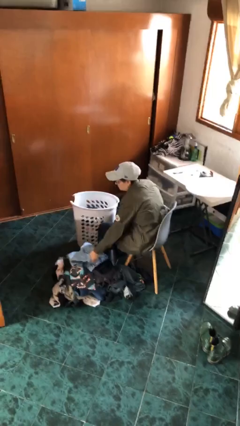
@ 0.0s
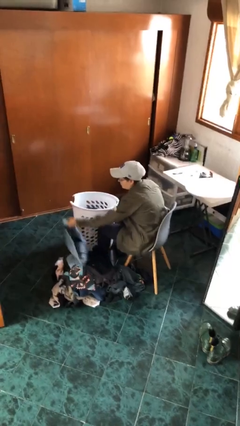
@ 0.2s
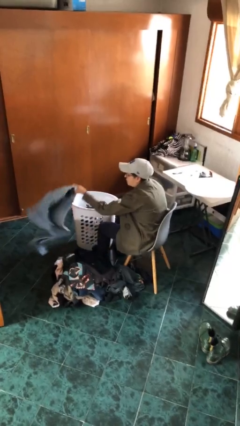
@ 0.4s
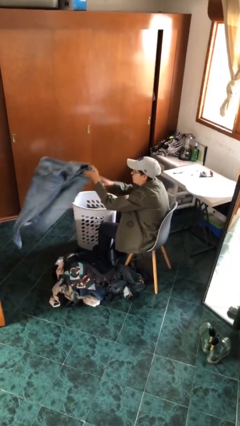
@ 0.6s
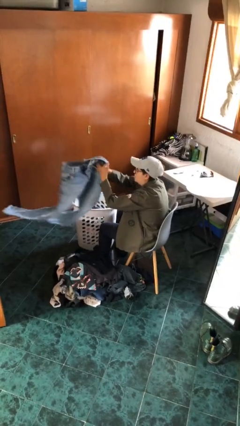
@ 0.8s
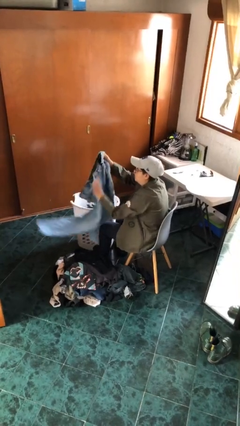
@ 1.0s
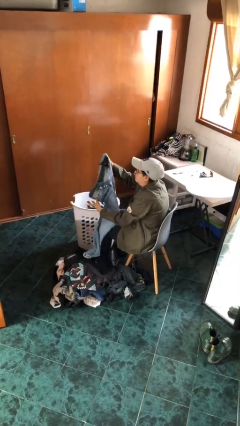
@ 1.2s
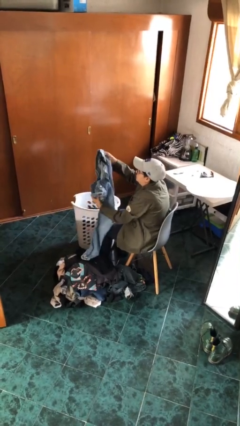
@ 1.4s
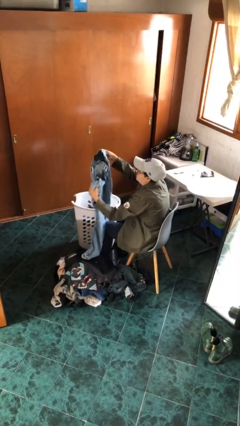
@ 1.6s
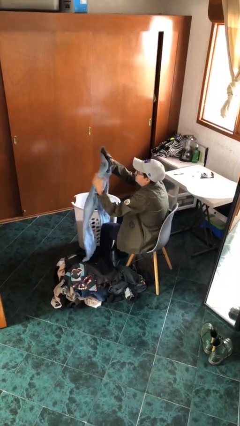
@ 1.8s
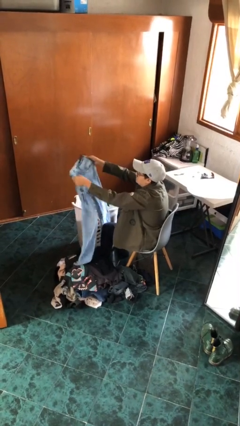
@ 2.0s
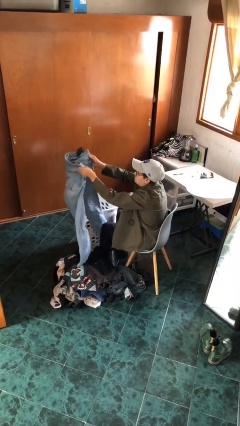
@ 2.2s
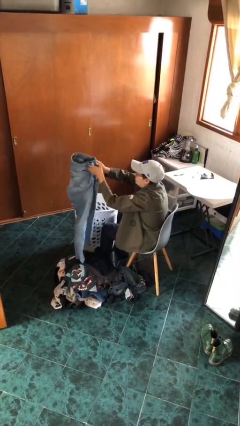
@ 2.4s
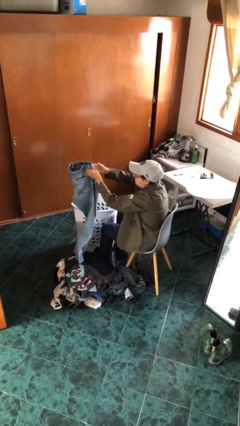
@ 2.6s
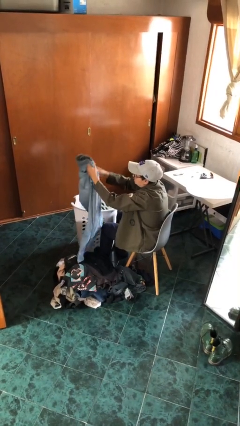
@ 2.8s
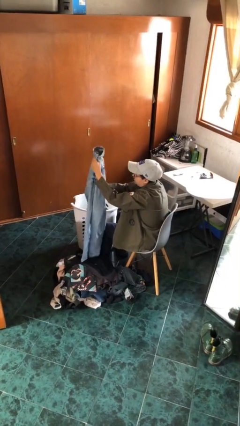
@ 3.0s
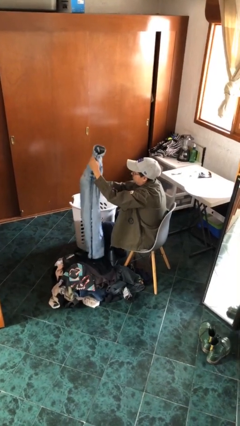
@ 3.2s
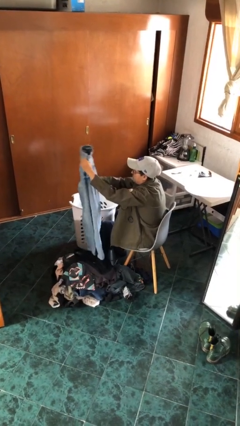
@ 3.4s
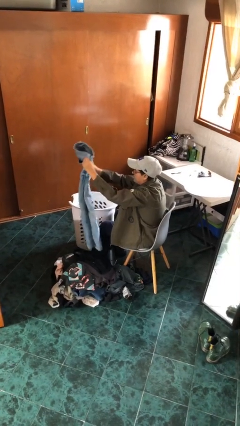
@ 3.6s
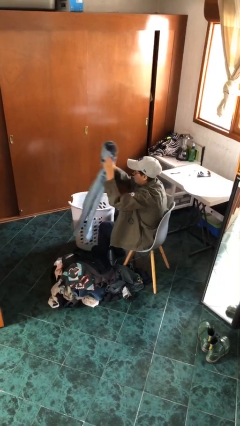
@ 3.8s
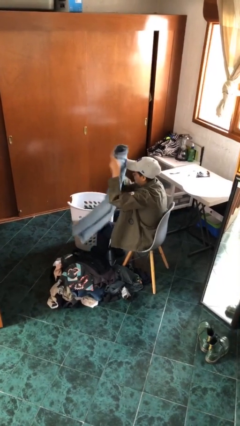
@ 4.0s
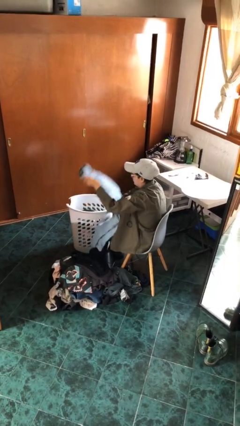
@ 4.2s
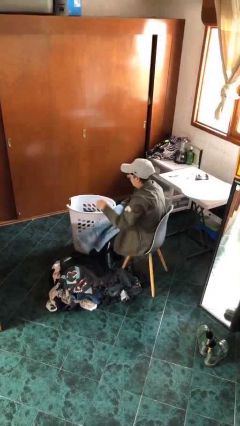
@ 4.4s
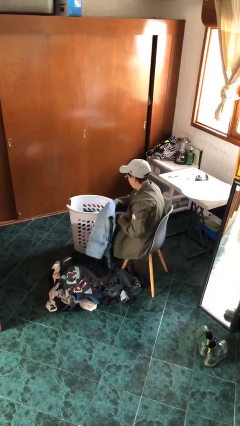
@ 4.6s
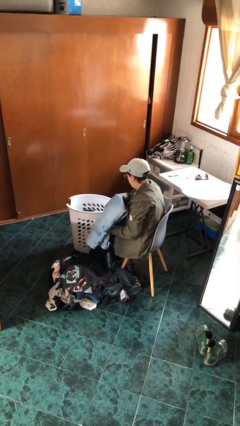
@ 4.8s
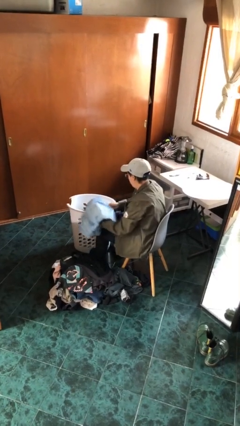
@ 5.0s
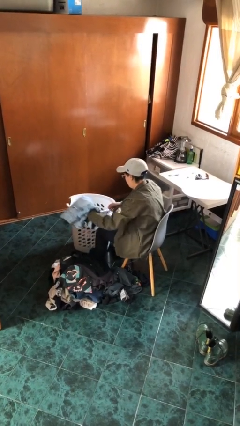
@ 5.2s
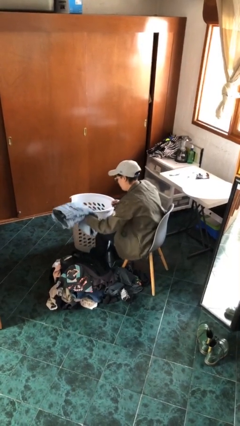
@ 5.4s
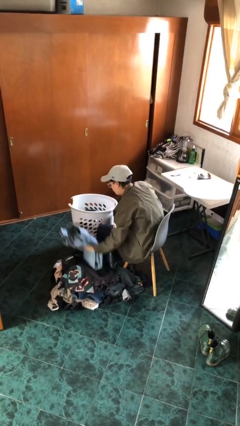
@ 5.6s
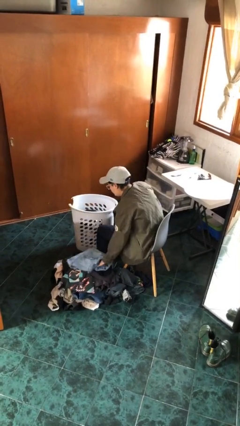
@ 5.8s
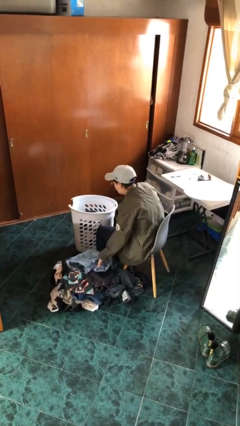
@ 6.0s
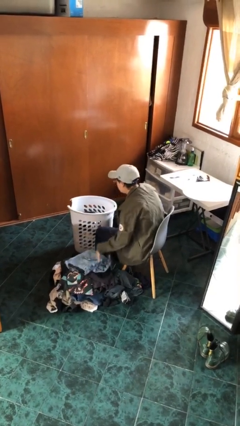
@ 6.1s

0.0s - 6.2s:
person folds pants

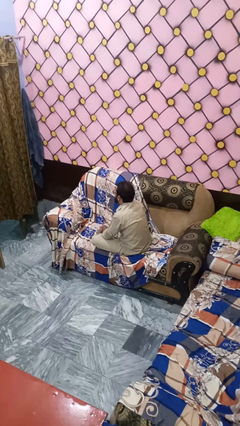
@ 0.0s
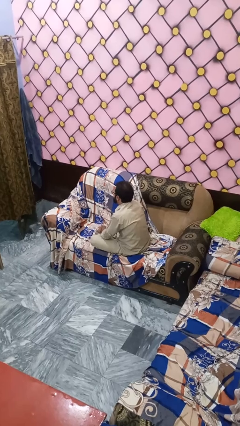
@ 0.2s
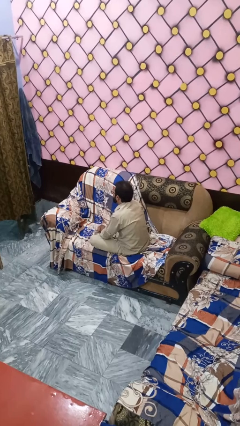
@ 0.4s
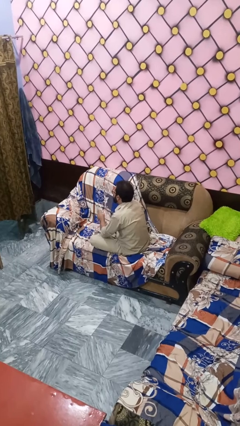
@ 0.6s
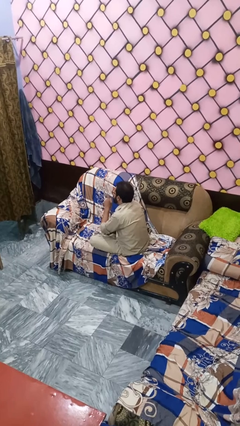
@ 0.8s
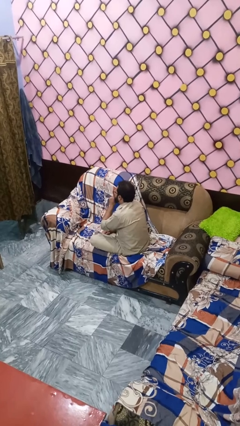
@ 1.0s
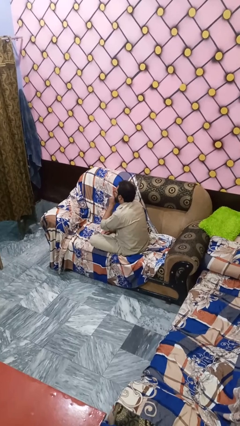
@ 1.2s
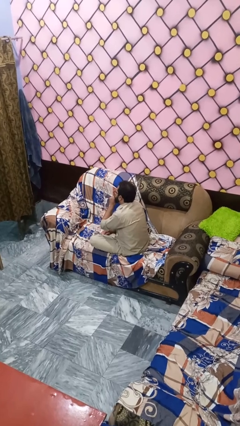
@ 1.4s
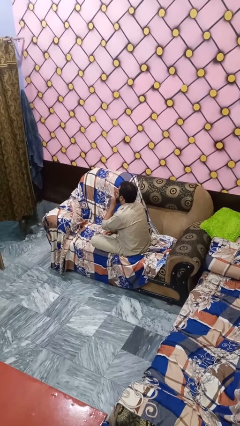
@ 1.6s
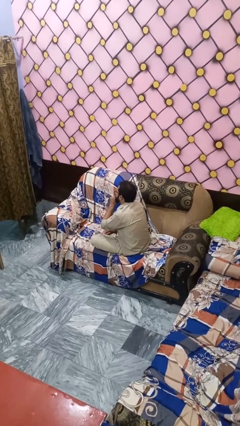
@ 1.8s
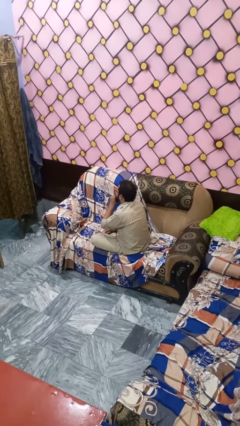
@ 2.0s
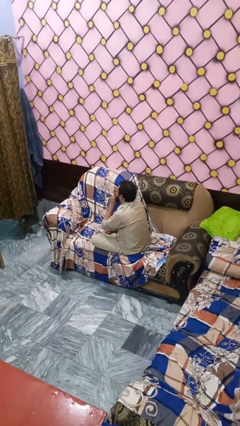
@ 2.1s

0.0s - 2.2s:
person gestures be quiet

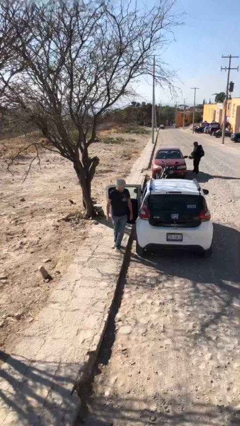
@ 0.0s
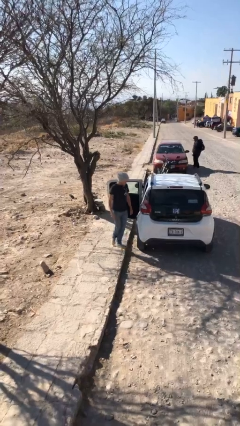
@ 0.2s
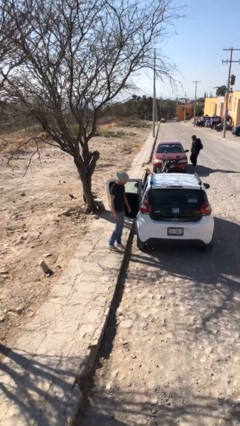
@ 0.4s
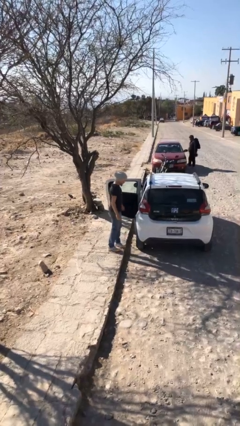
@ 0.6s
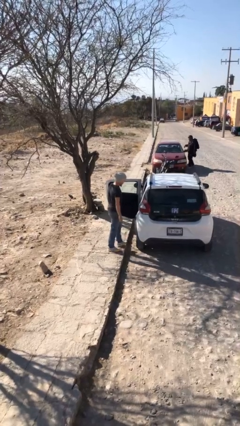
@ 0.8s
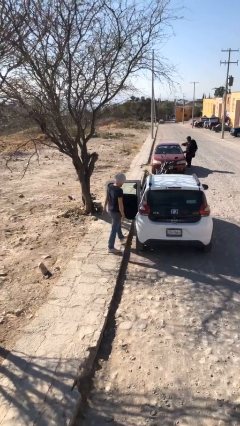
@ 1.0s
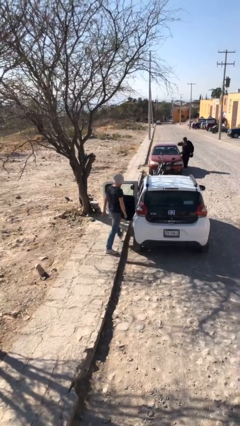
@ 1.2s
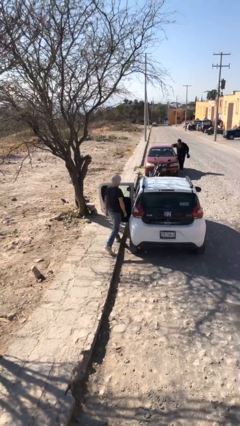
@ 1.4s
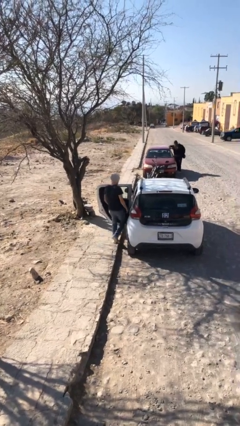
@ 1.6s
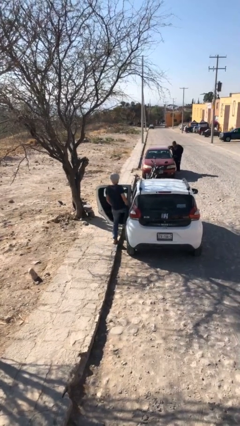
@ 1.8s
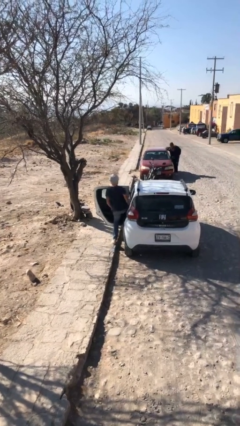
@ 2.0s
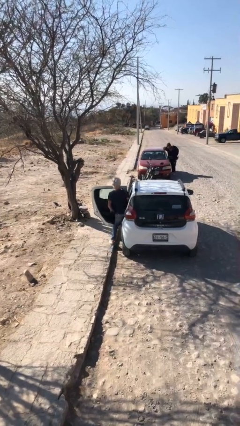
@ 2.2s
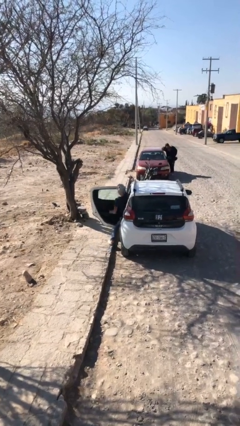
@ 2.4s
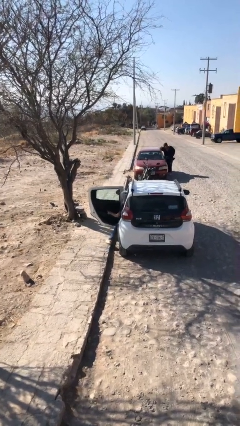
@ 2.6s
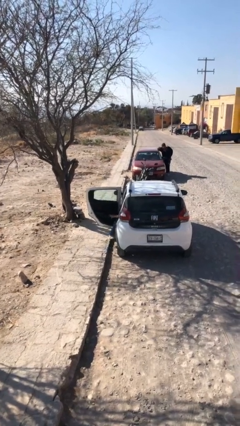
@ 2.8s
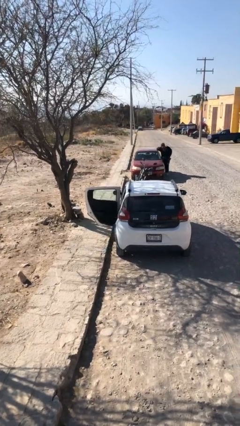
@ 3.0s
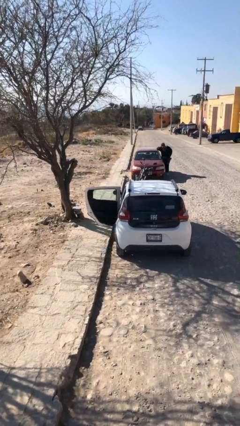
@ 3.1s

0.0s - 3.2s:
person enters car

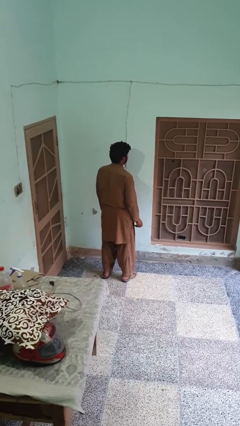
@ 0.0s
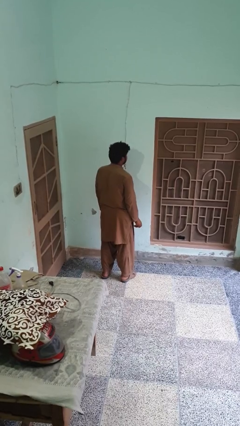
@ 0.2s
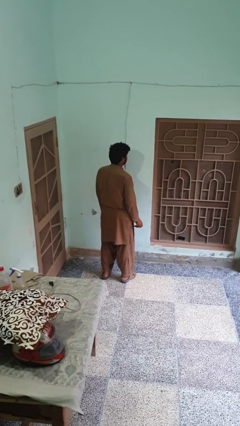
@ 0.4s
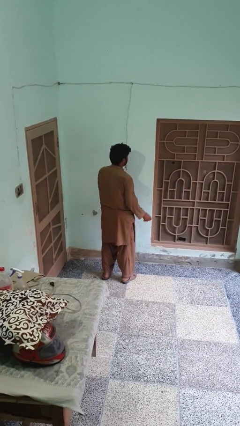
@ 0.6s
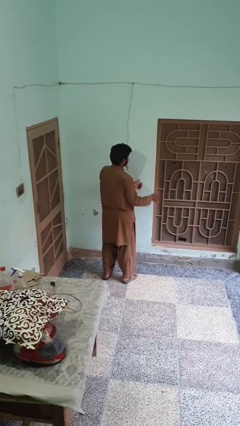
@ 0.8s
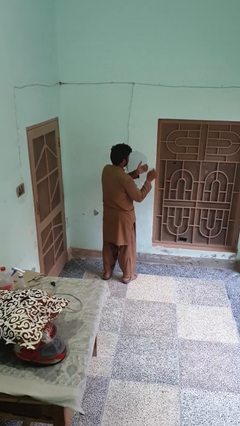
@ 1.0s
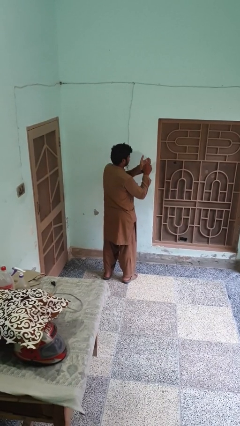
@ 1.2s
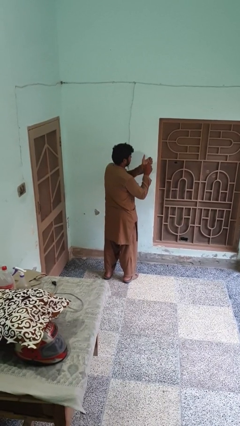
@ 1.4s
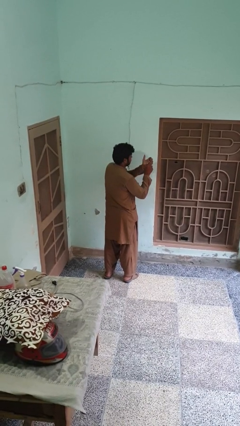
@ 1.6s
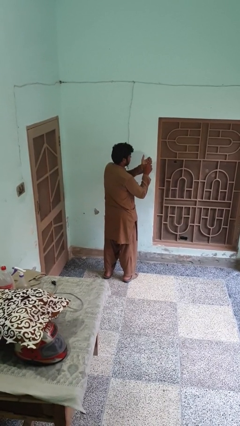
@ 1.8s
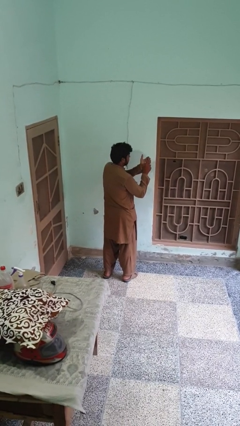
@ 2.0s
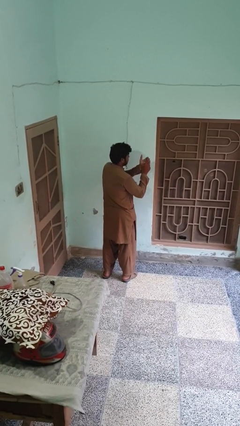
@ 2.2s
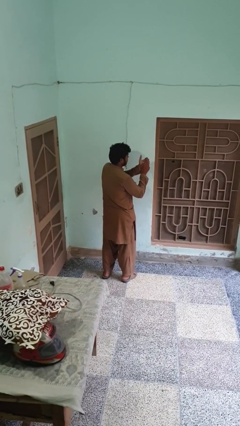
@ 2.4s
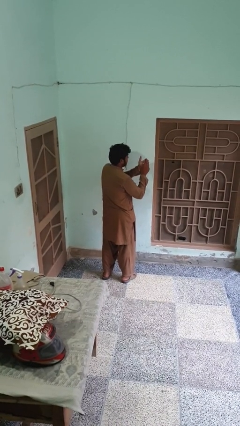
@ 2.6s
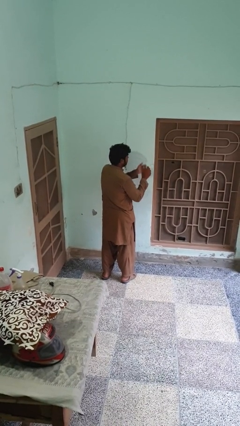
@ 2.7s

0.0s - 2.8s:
person paints fingernails

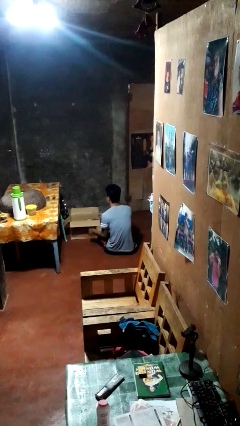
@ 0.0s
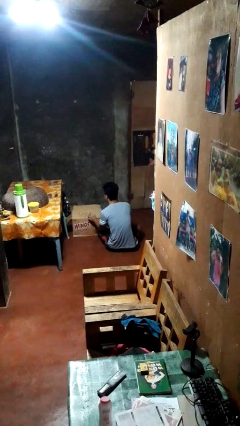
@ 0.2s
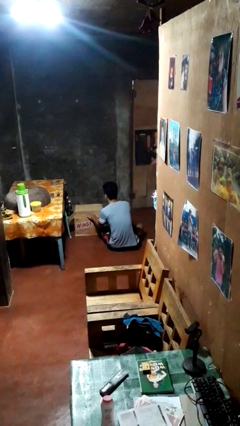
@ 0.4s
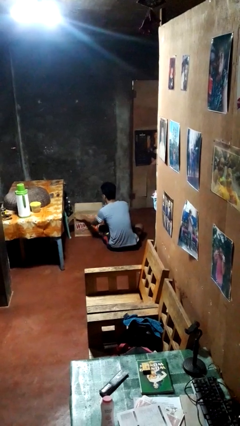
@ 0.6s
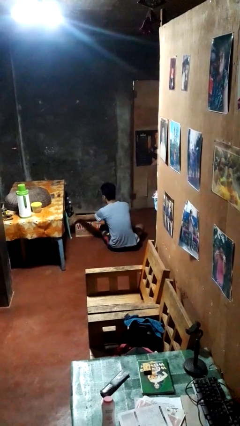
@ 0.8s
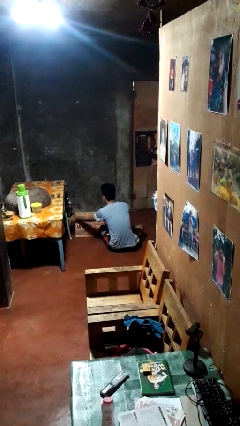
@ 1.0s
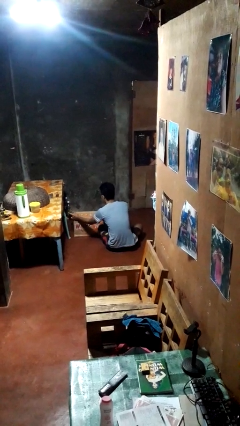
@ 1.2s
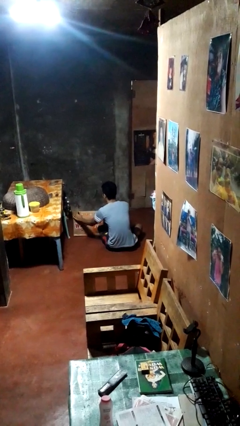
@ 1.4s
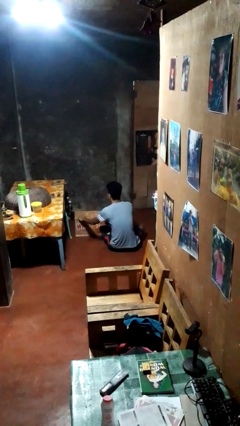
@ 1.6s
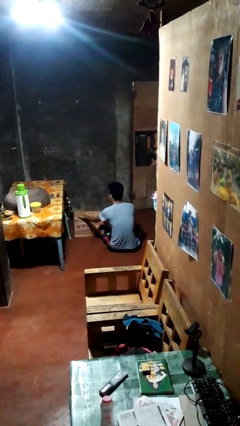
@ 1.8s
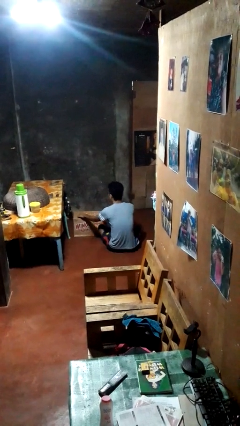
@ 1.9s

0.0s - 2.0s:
person closes box

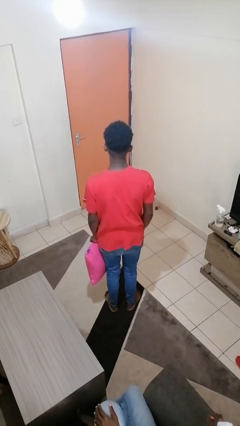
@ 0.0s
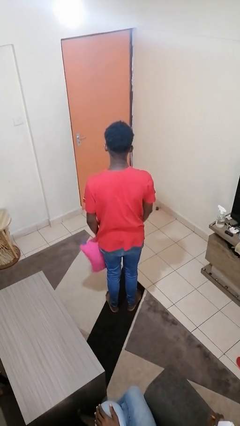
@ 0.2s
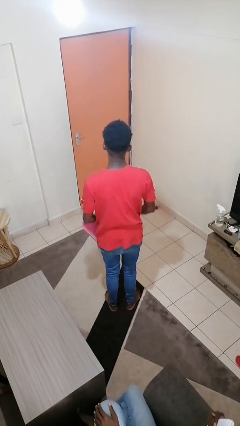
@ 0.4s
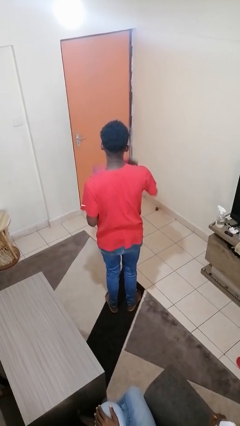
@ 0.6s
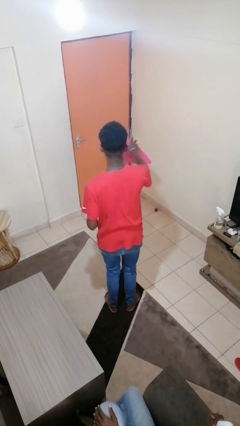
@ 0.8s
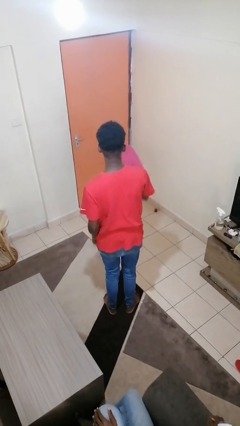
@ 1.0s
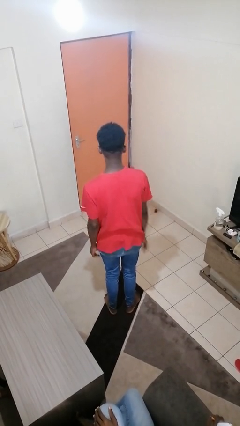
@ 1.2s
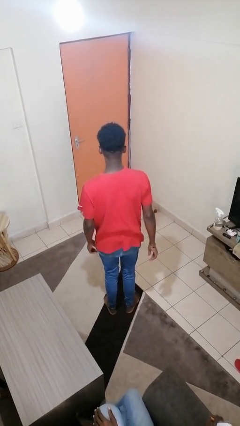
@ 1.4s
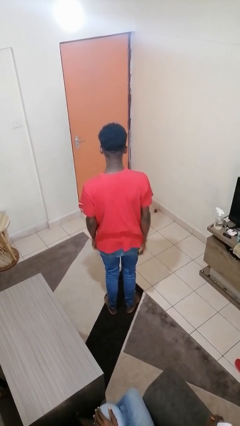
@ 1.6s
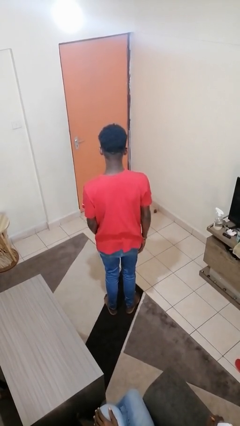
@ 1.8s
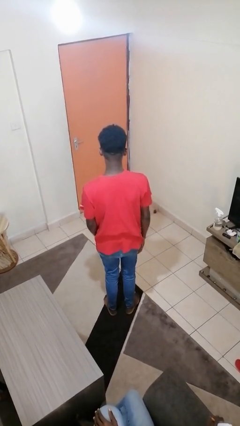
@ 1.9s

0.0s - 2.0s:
person throws object to ground
